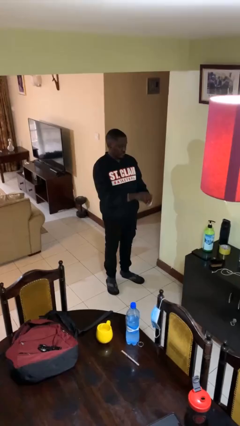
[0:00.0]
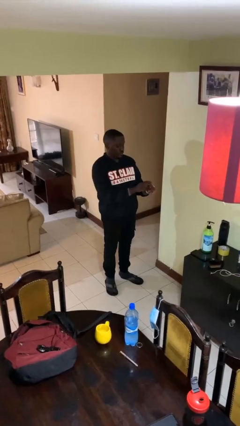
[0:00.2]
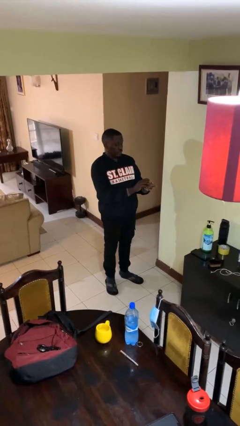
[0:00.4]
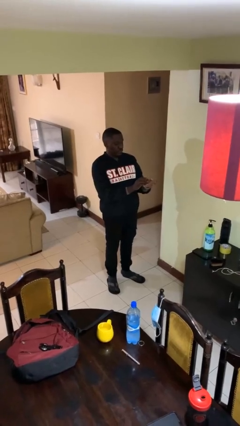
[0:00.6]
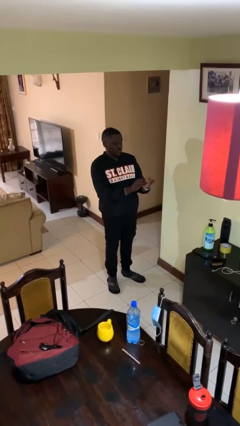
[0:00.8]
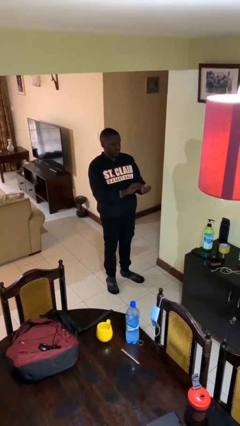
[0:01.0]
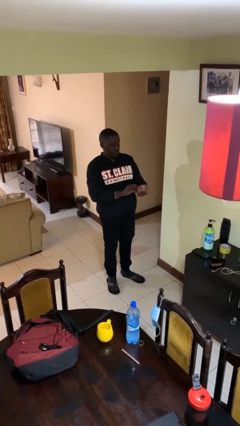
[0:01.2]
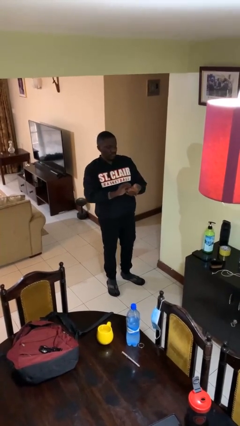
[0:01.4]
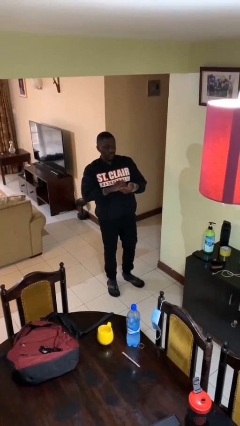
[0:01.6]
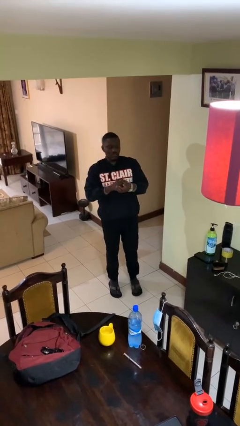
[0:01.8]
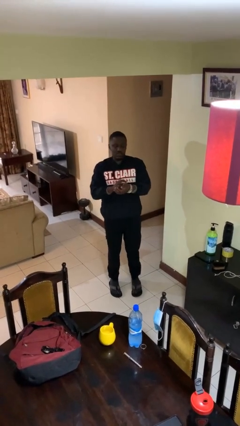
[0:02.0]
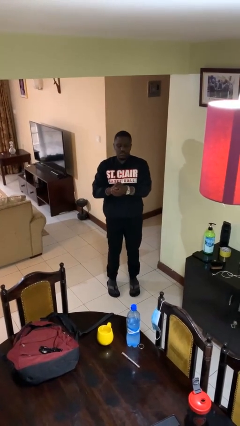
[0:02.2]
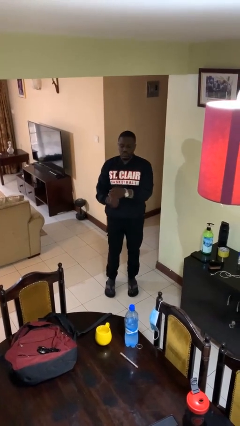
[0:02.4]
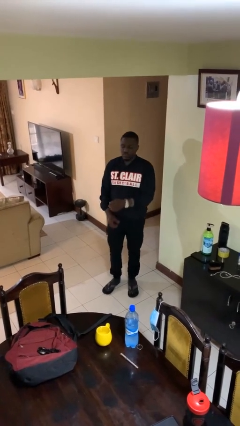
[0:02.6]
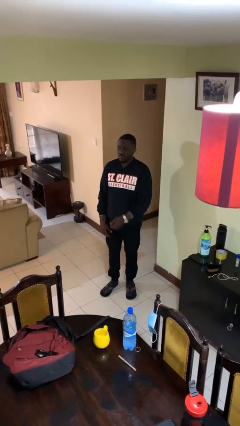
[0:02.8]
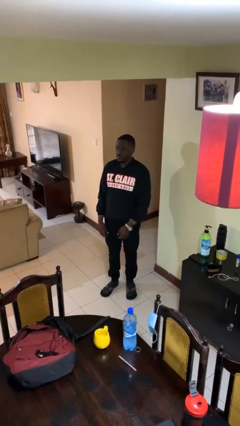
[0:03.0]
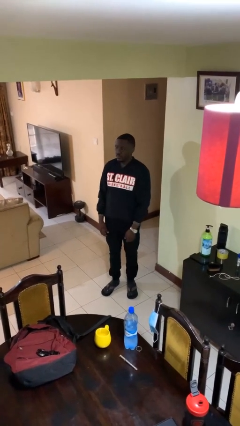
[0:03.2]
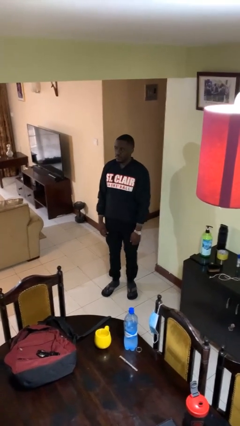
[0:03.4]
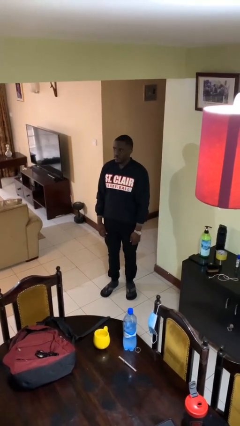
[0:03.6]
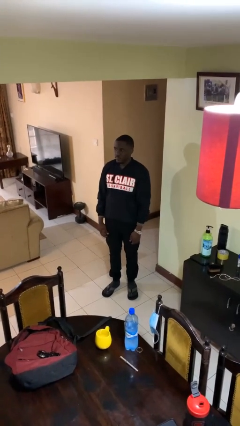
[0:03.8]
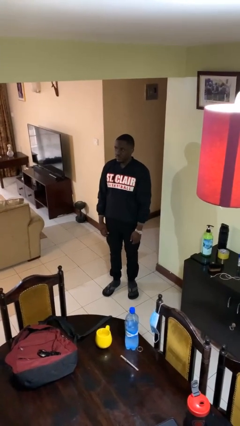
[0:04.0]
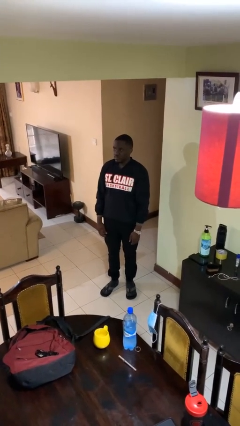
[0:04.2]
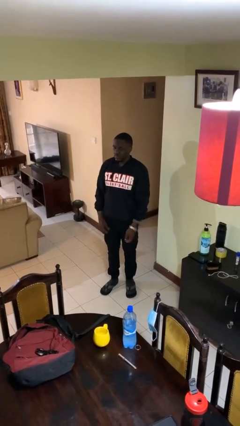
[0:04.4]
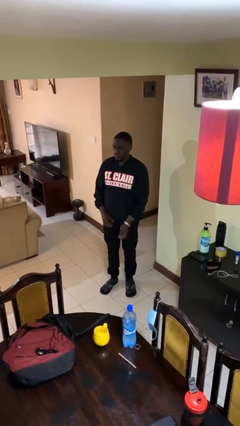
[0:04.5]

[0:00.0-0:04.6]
person puts on wristwatch

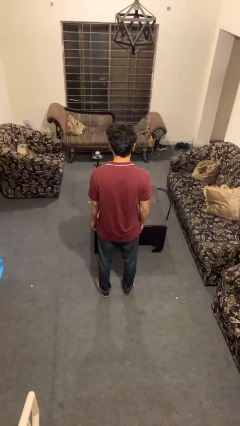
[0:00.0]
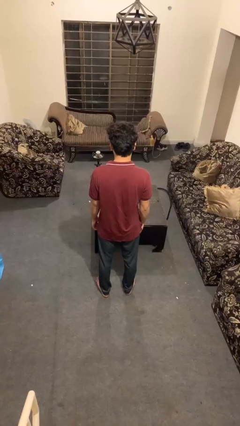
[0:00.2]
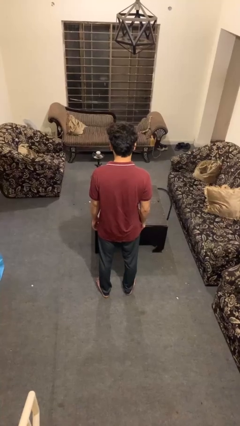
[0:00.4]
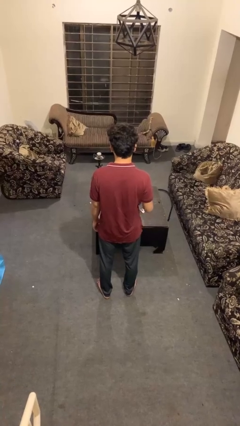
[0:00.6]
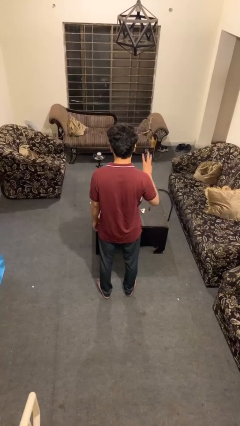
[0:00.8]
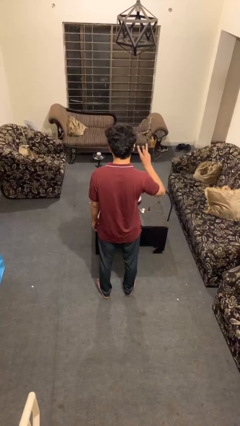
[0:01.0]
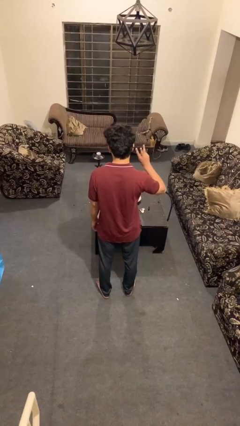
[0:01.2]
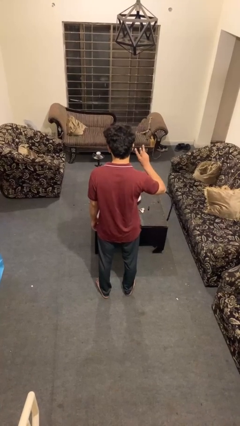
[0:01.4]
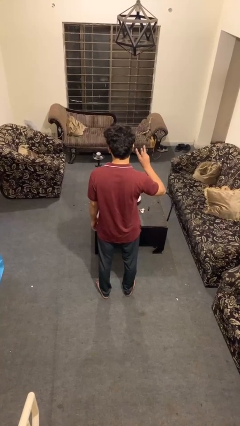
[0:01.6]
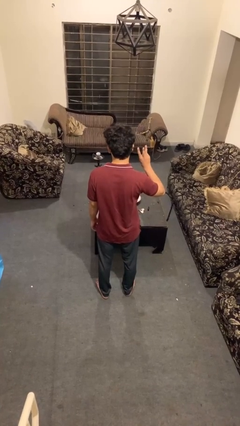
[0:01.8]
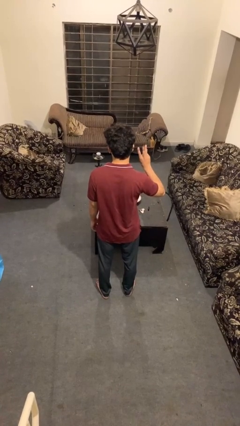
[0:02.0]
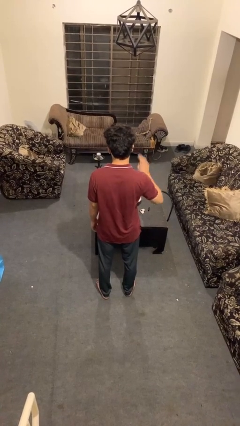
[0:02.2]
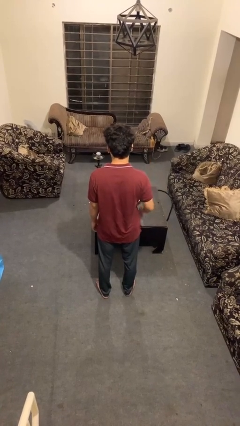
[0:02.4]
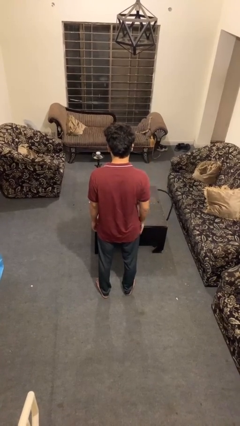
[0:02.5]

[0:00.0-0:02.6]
person gestures number three

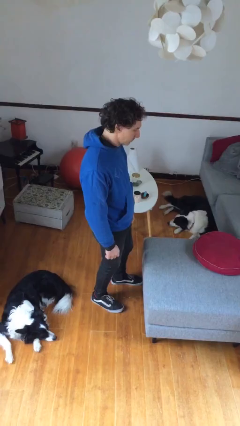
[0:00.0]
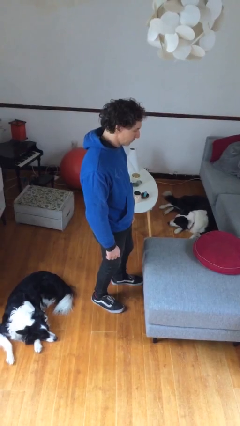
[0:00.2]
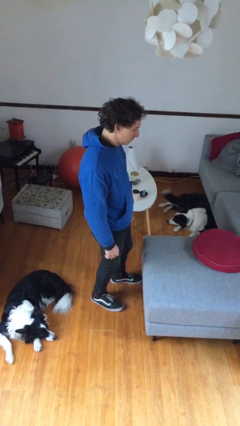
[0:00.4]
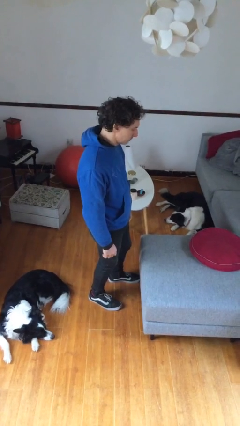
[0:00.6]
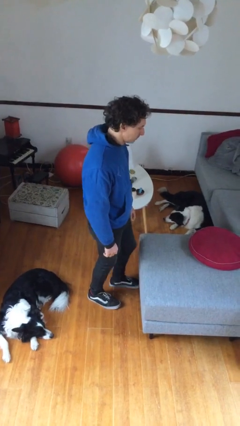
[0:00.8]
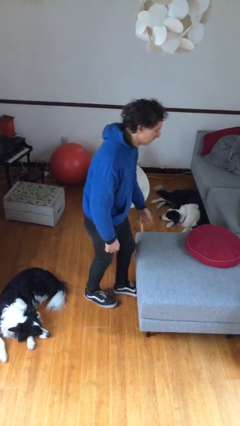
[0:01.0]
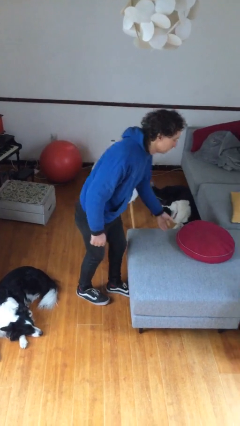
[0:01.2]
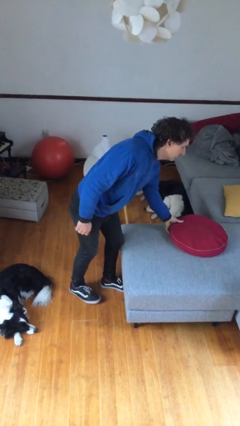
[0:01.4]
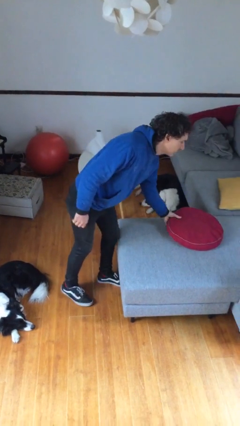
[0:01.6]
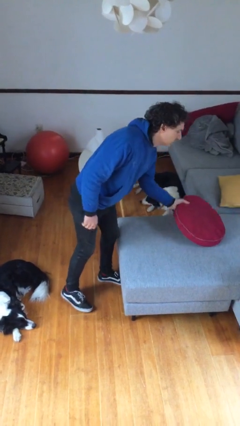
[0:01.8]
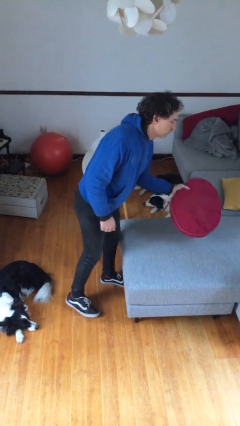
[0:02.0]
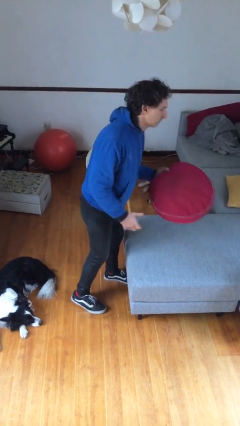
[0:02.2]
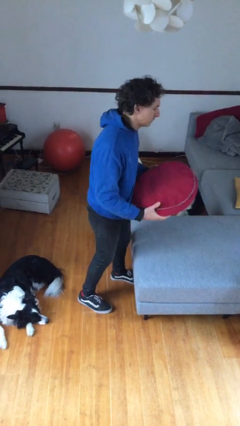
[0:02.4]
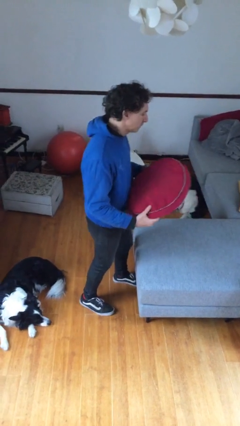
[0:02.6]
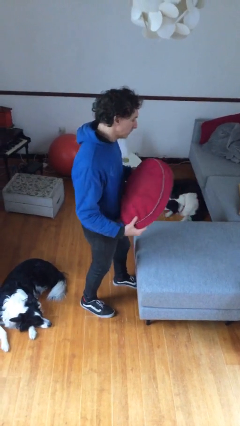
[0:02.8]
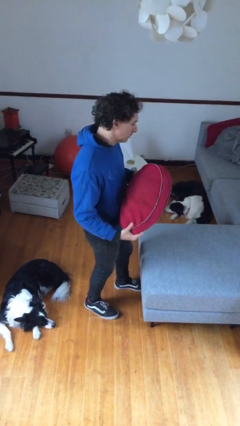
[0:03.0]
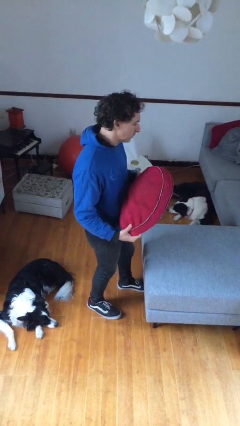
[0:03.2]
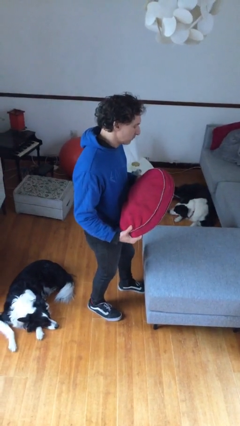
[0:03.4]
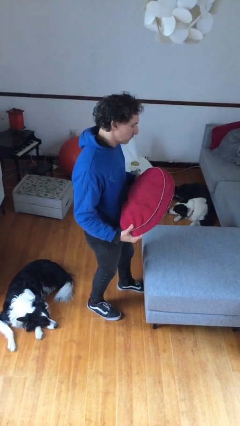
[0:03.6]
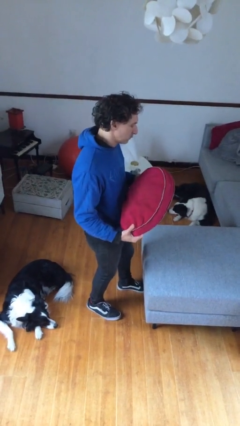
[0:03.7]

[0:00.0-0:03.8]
person picks up object from couch

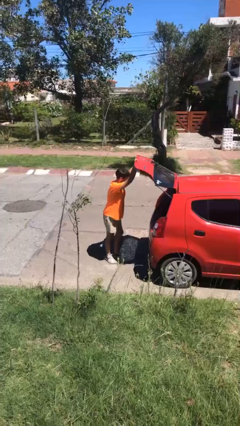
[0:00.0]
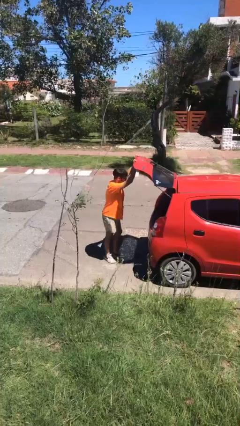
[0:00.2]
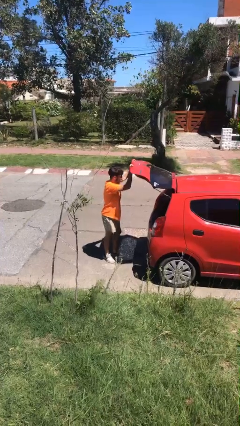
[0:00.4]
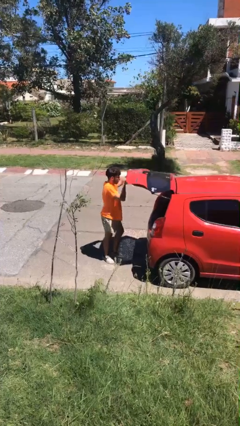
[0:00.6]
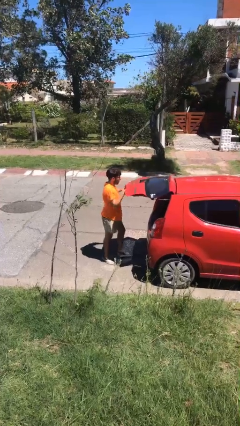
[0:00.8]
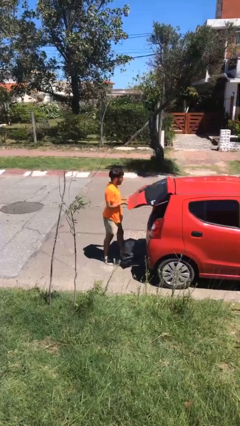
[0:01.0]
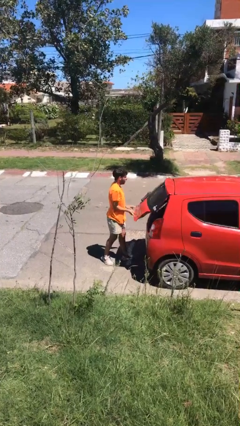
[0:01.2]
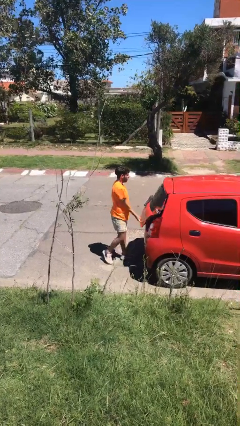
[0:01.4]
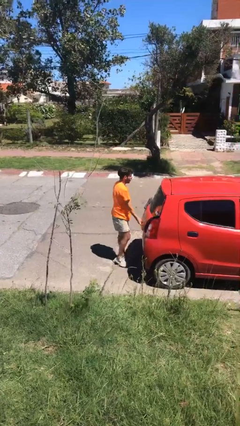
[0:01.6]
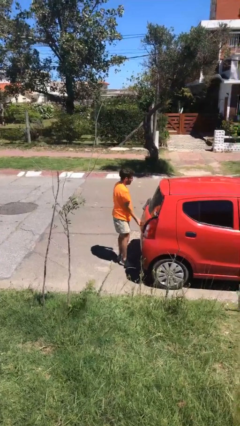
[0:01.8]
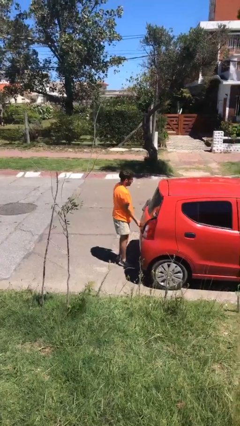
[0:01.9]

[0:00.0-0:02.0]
person closes car trunk

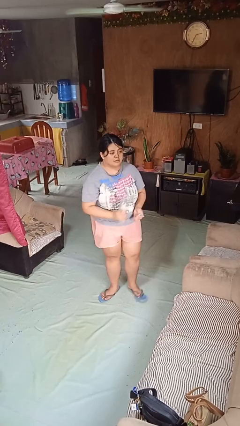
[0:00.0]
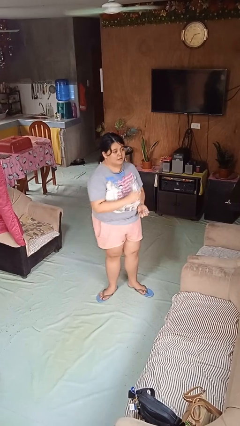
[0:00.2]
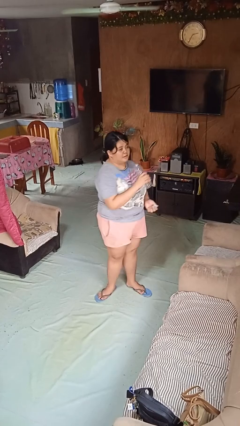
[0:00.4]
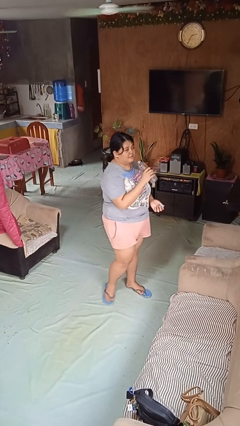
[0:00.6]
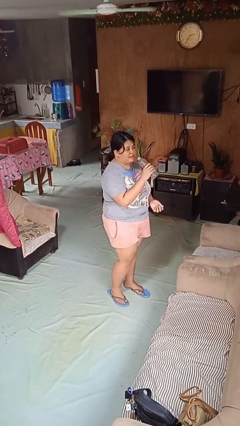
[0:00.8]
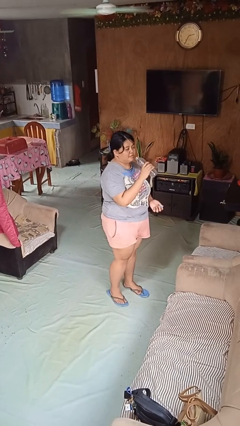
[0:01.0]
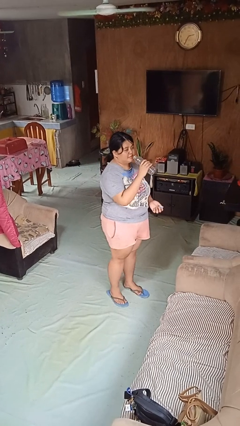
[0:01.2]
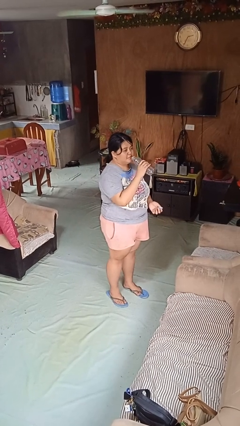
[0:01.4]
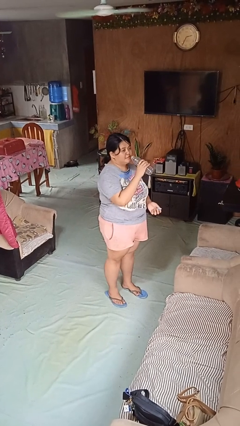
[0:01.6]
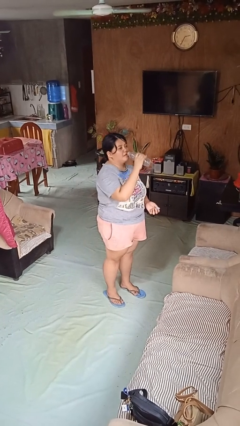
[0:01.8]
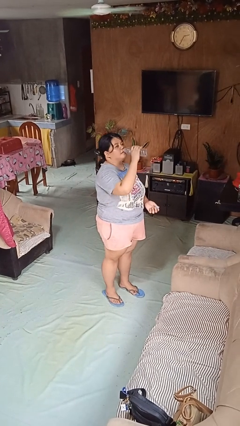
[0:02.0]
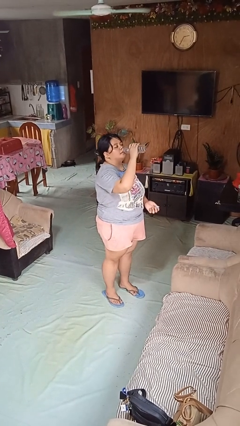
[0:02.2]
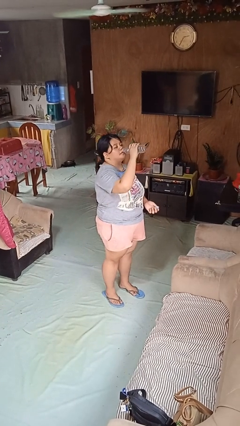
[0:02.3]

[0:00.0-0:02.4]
person drinks from bottle

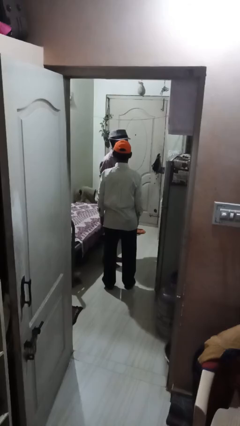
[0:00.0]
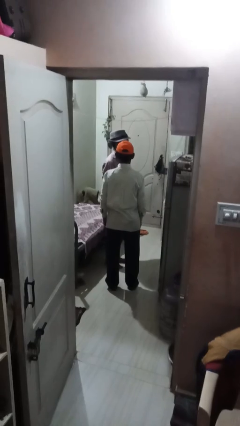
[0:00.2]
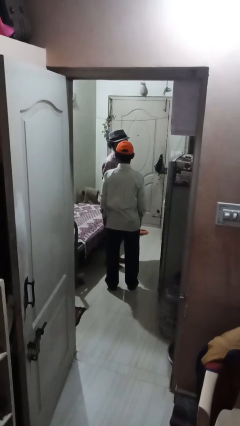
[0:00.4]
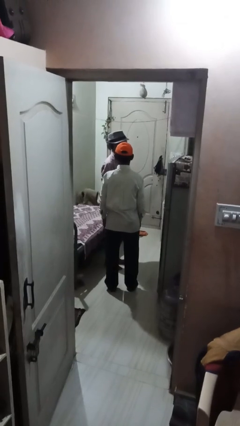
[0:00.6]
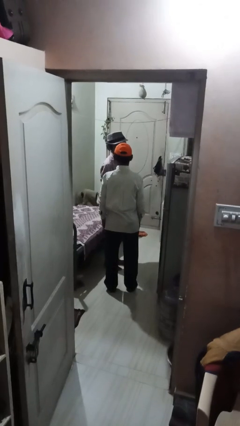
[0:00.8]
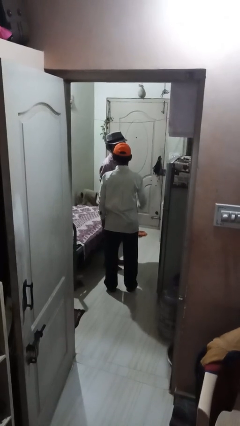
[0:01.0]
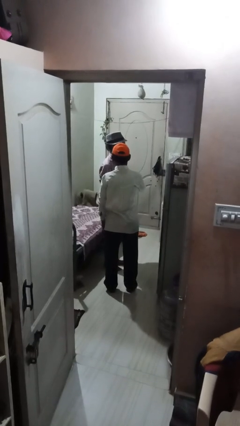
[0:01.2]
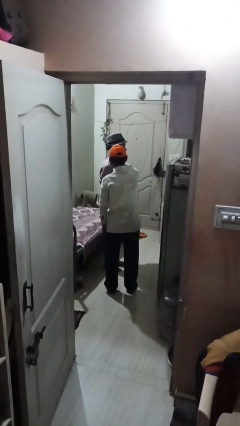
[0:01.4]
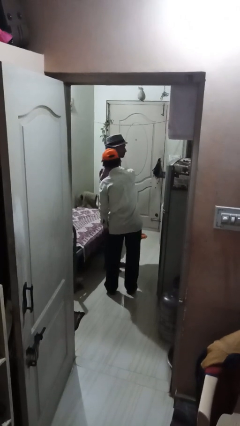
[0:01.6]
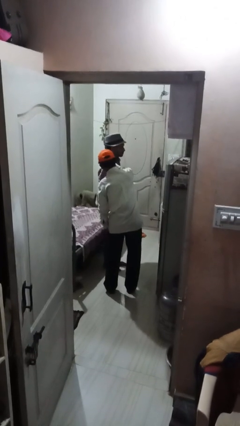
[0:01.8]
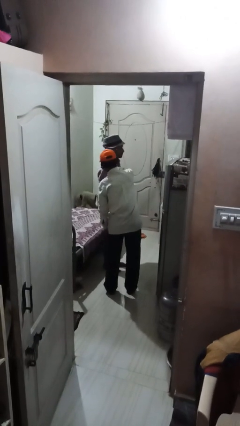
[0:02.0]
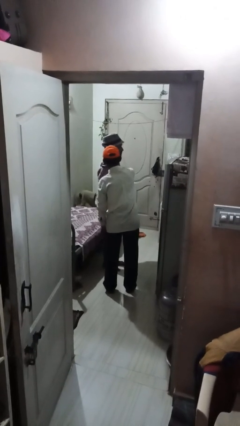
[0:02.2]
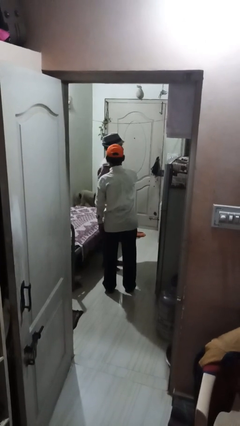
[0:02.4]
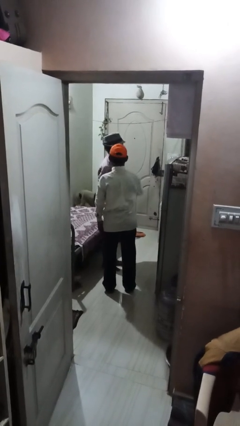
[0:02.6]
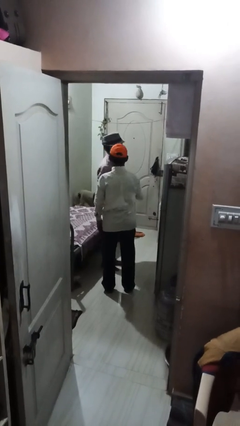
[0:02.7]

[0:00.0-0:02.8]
person pounds shoulders of person
